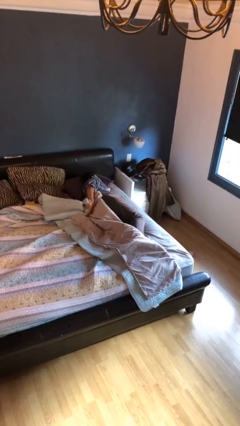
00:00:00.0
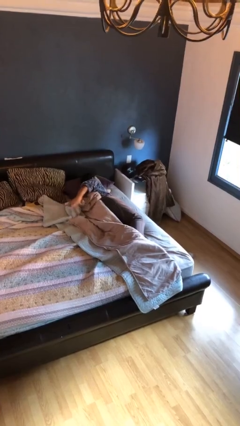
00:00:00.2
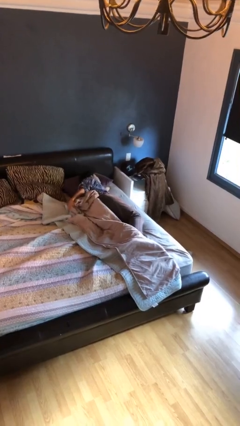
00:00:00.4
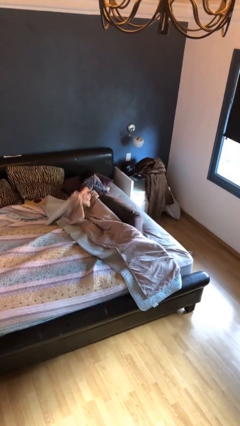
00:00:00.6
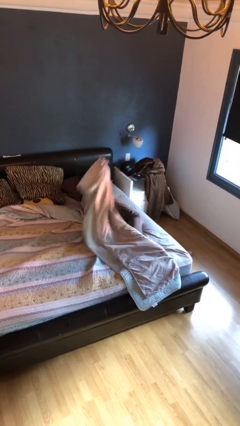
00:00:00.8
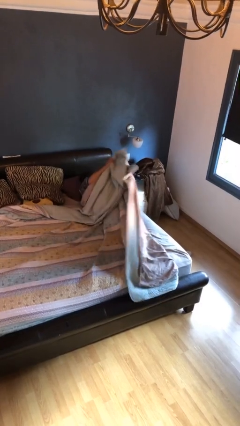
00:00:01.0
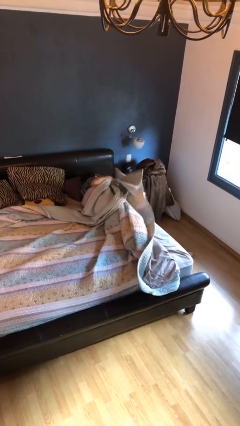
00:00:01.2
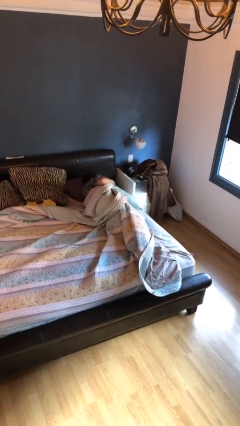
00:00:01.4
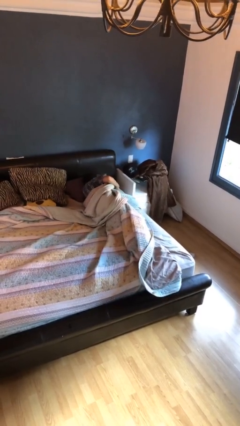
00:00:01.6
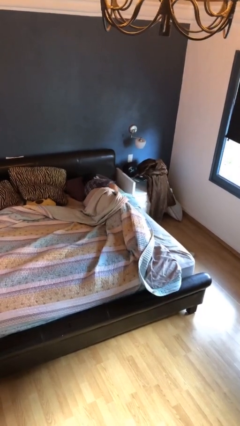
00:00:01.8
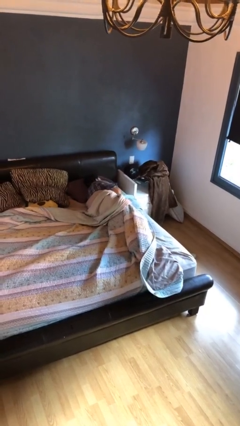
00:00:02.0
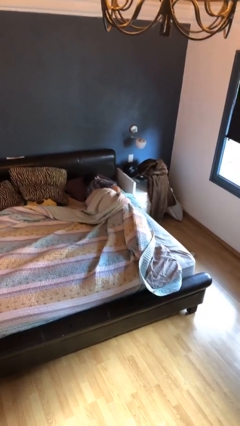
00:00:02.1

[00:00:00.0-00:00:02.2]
person covers with bedsheets

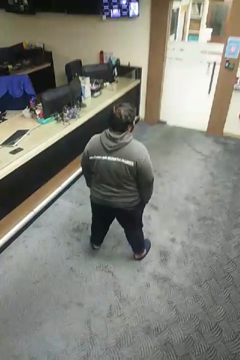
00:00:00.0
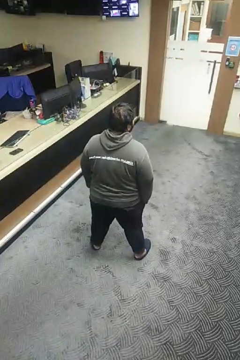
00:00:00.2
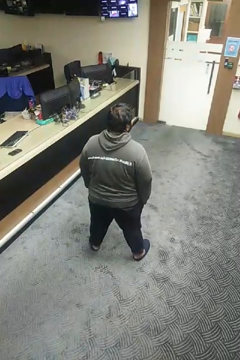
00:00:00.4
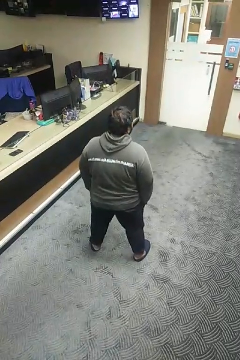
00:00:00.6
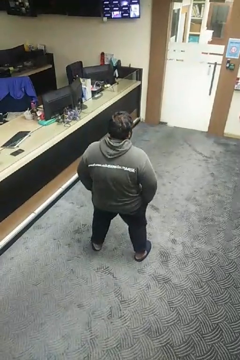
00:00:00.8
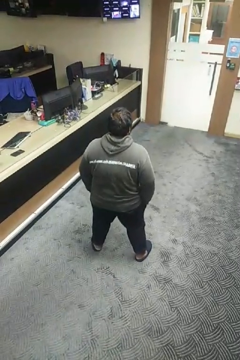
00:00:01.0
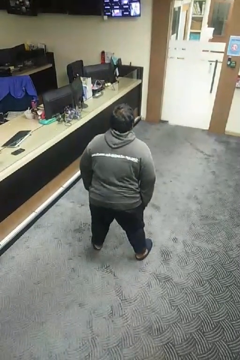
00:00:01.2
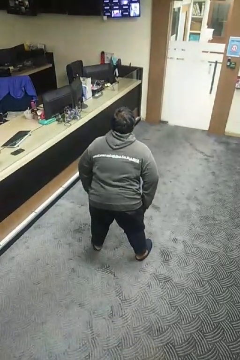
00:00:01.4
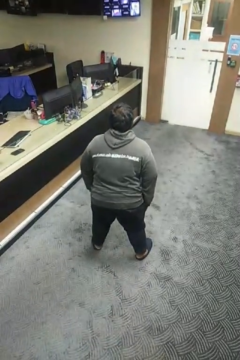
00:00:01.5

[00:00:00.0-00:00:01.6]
person wiggles hips

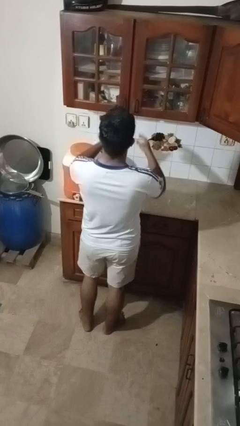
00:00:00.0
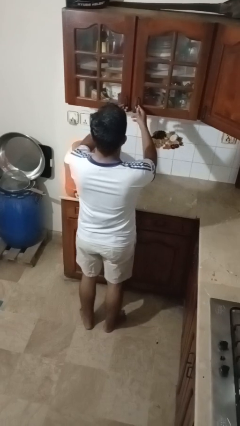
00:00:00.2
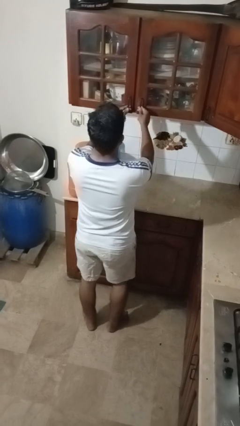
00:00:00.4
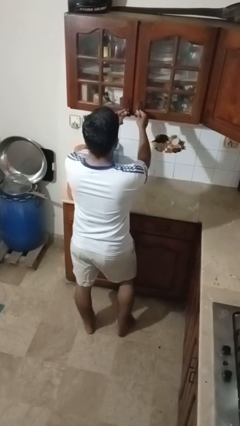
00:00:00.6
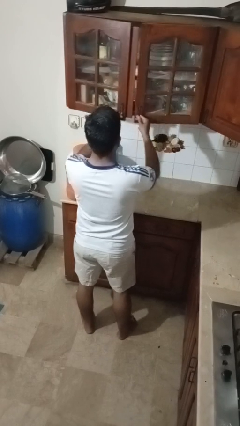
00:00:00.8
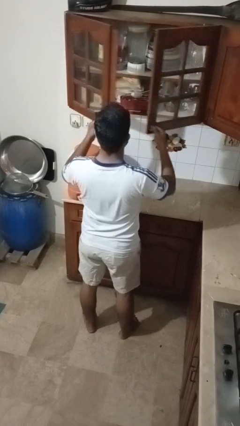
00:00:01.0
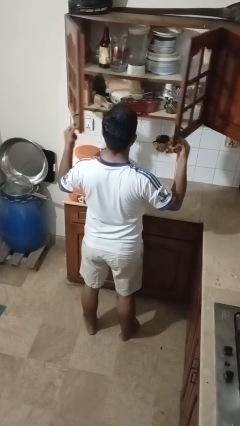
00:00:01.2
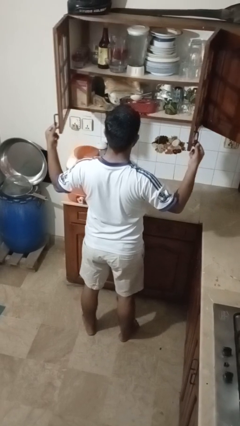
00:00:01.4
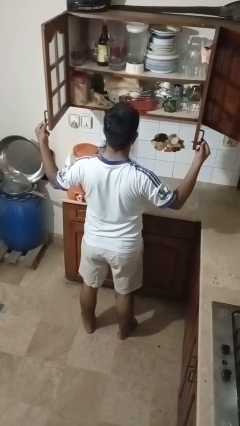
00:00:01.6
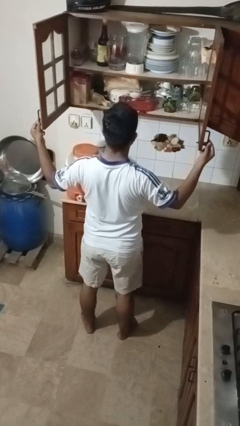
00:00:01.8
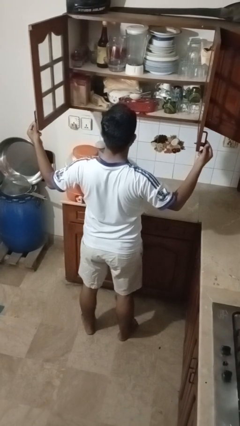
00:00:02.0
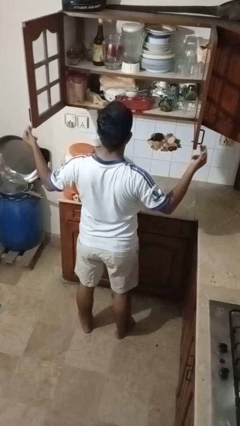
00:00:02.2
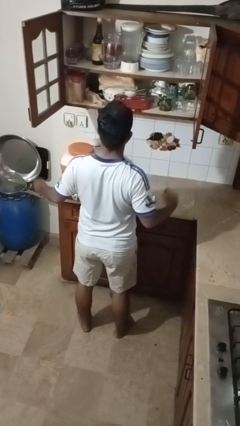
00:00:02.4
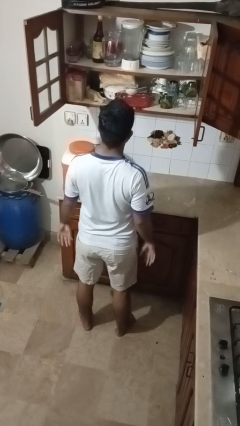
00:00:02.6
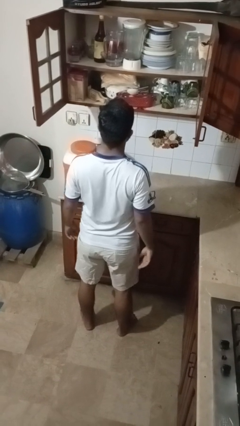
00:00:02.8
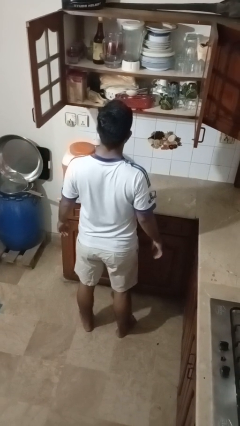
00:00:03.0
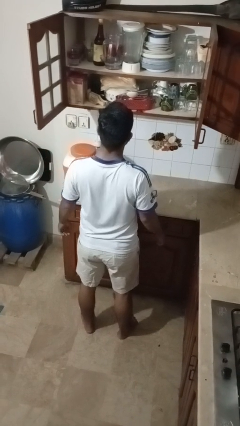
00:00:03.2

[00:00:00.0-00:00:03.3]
person opens cabinet

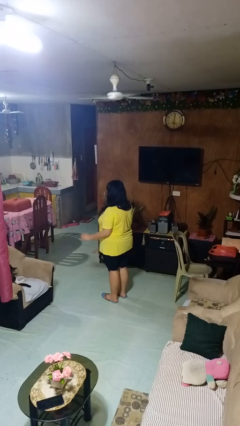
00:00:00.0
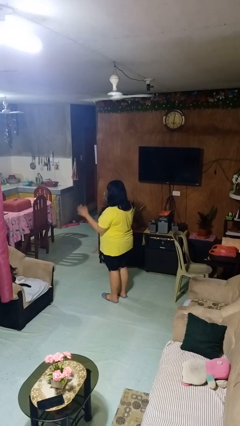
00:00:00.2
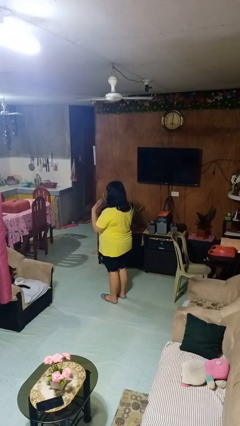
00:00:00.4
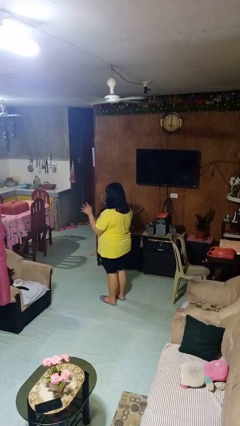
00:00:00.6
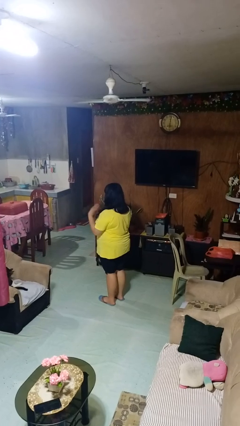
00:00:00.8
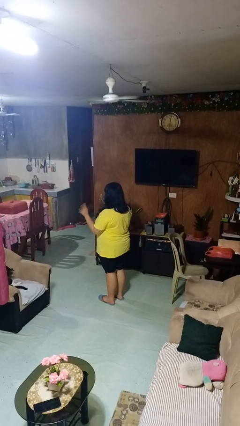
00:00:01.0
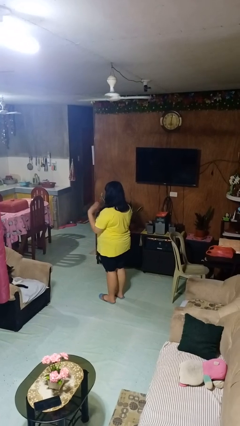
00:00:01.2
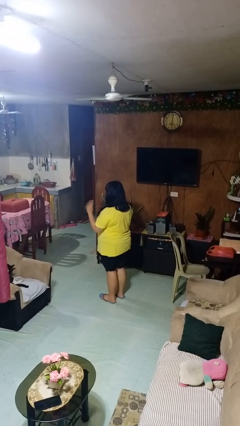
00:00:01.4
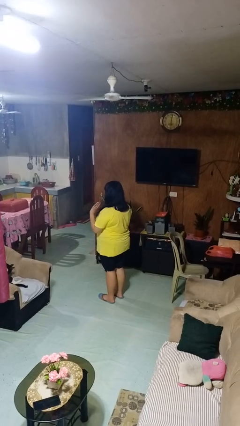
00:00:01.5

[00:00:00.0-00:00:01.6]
person waves at person

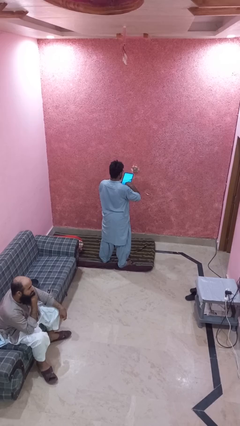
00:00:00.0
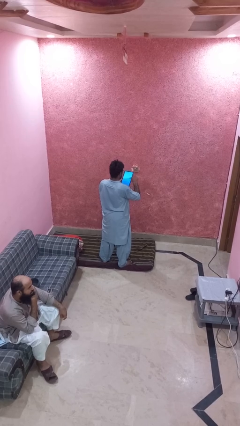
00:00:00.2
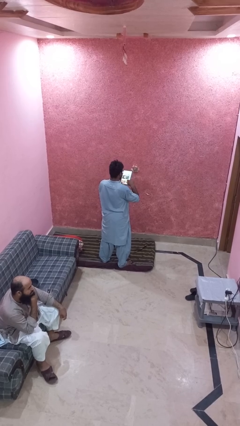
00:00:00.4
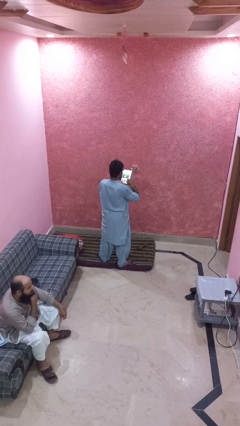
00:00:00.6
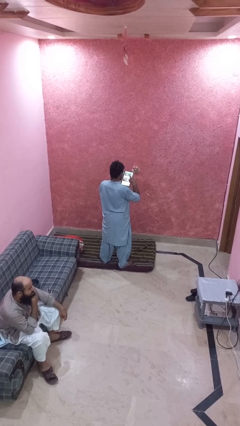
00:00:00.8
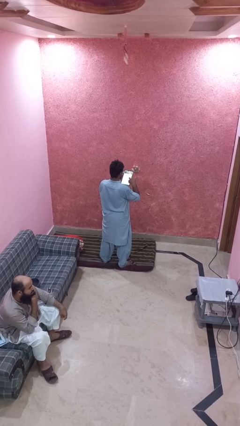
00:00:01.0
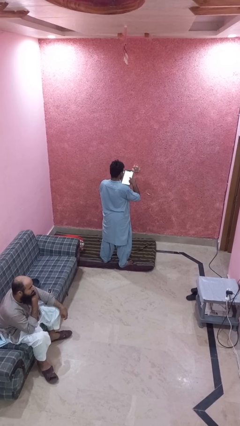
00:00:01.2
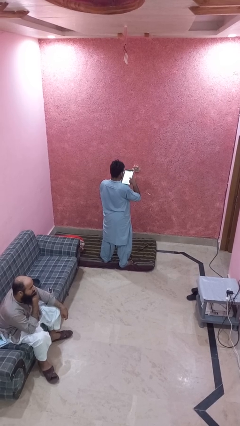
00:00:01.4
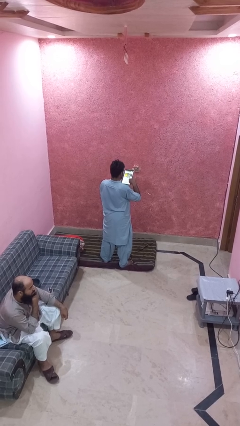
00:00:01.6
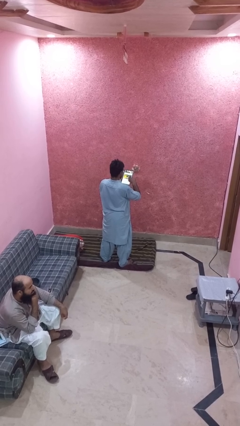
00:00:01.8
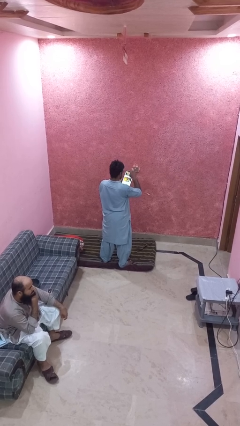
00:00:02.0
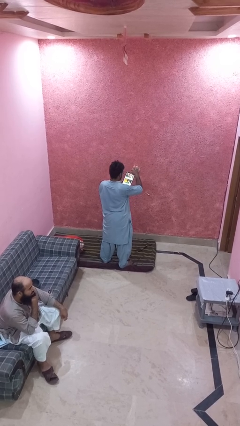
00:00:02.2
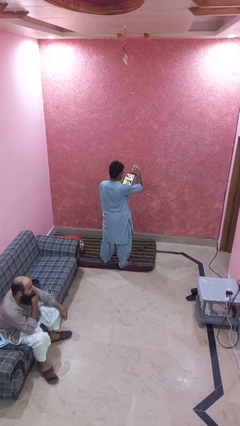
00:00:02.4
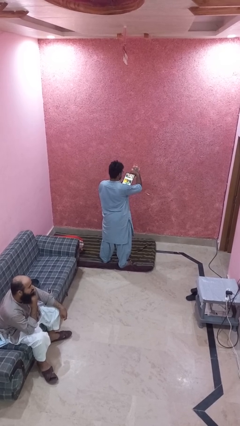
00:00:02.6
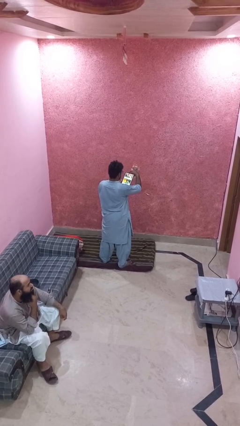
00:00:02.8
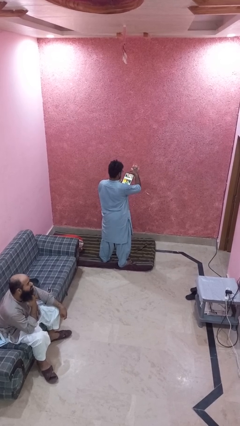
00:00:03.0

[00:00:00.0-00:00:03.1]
person interacts with tablet

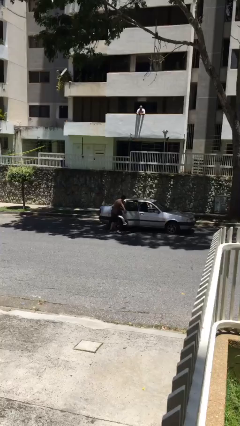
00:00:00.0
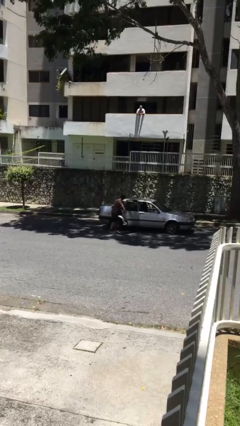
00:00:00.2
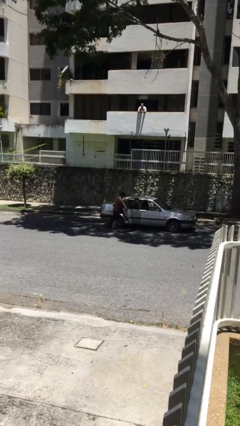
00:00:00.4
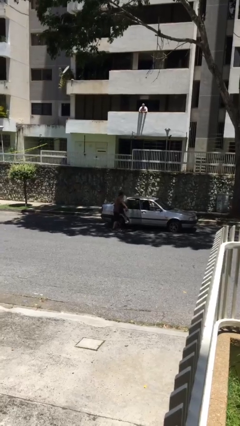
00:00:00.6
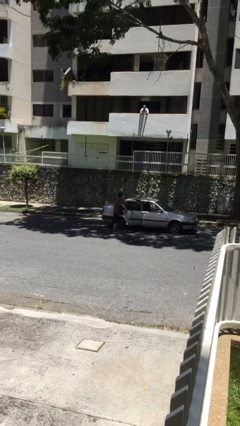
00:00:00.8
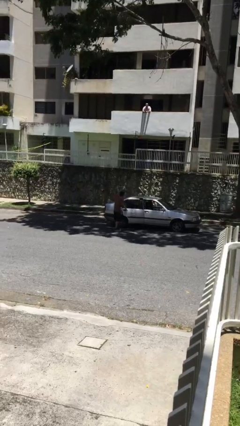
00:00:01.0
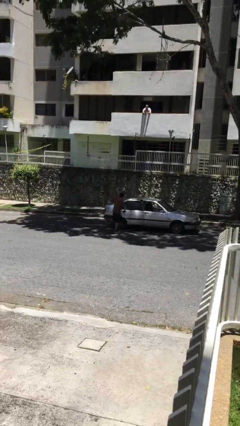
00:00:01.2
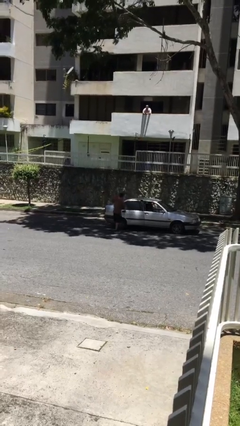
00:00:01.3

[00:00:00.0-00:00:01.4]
person unloads car

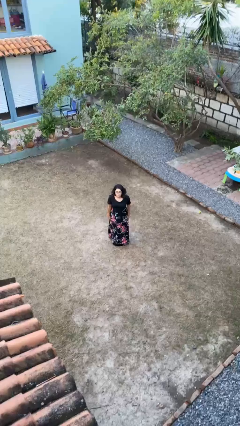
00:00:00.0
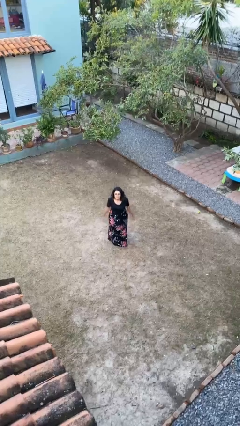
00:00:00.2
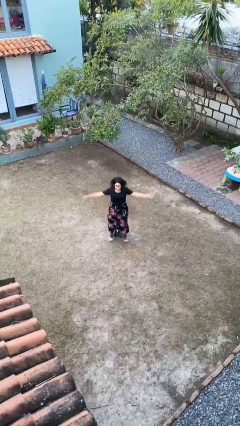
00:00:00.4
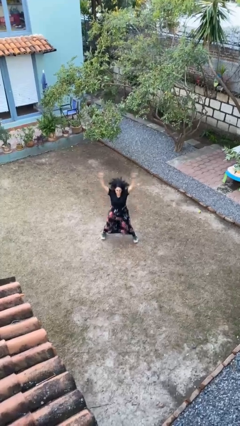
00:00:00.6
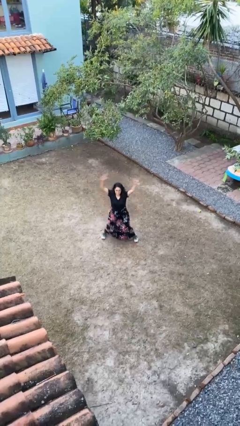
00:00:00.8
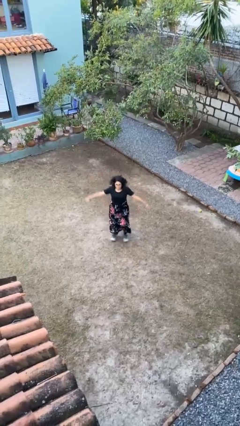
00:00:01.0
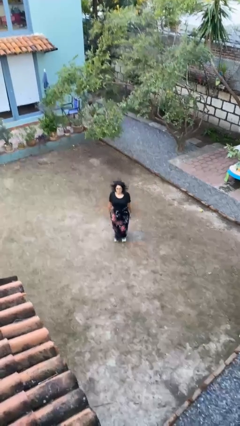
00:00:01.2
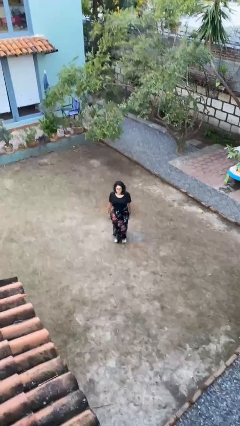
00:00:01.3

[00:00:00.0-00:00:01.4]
person exercises with jumping jacks

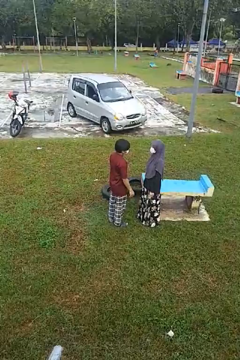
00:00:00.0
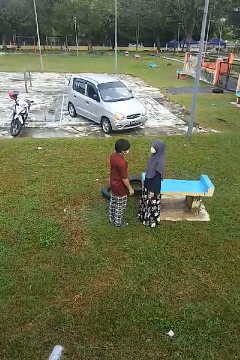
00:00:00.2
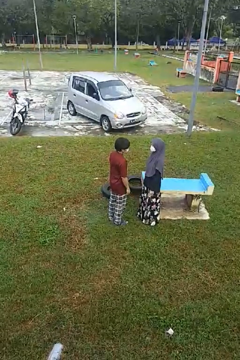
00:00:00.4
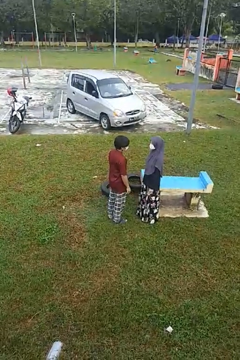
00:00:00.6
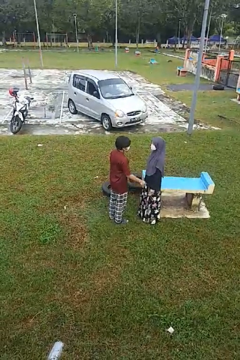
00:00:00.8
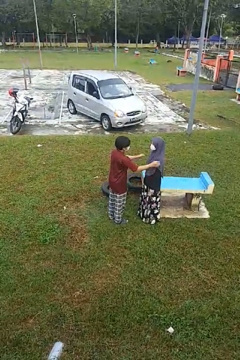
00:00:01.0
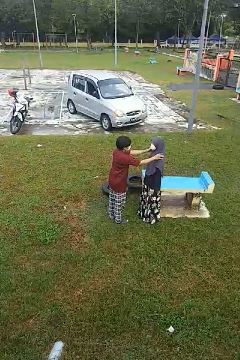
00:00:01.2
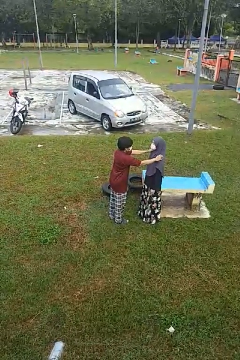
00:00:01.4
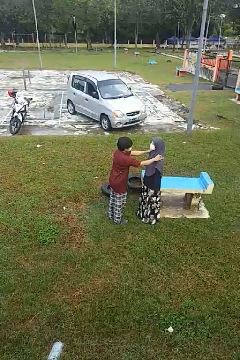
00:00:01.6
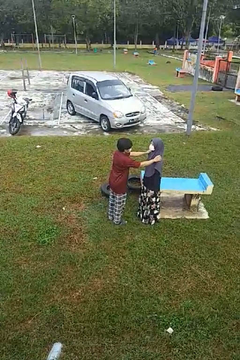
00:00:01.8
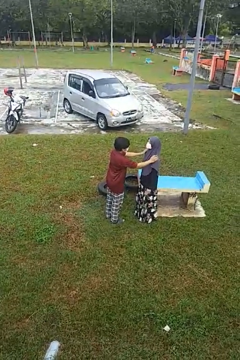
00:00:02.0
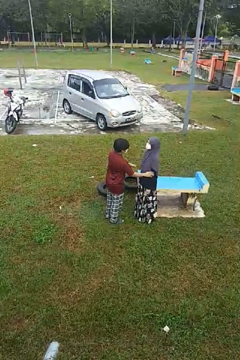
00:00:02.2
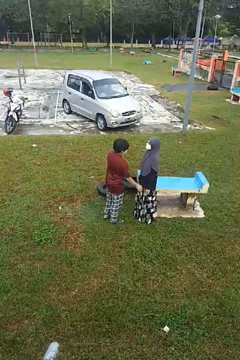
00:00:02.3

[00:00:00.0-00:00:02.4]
person pounds shoulders of person

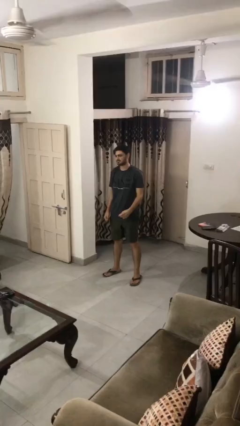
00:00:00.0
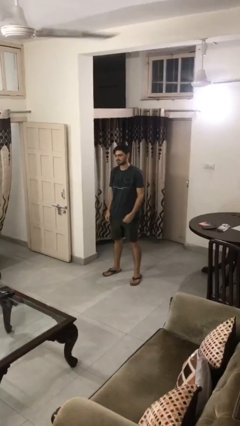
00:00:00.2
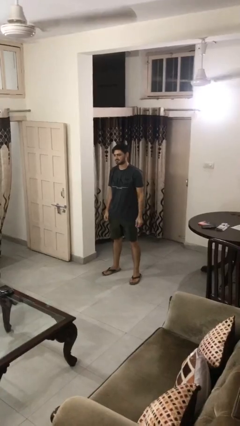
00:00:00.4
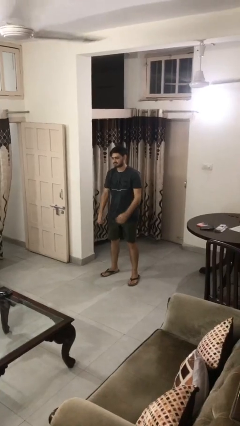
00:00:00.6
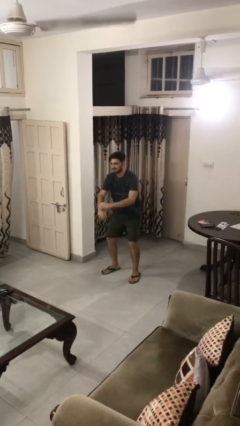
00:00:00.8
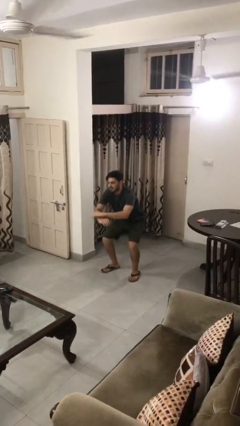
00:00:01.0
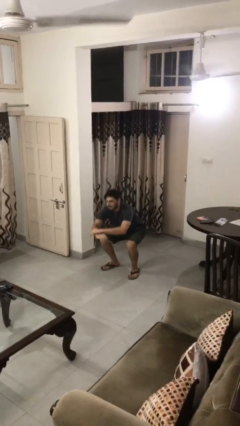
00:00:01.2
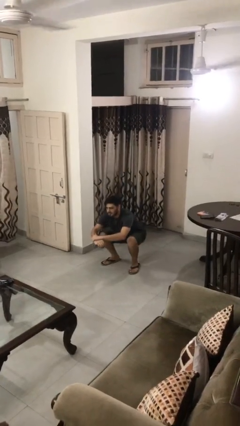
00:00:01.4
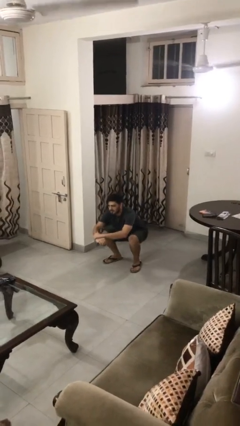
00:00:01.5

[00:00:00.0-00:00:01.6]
person squats
